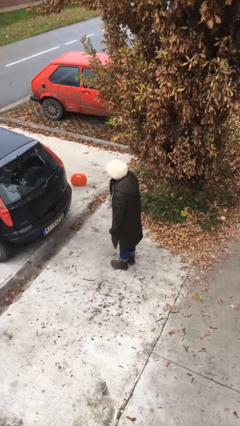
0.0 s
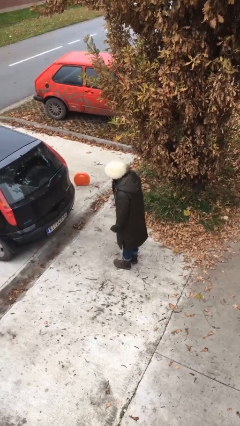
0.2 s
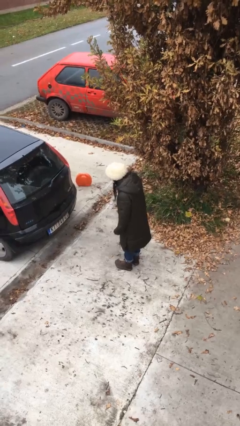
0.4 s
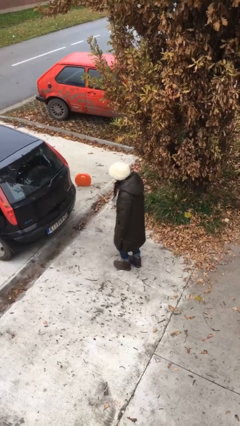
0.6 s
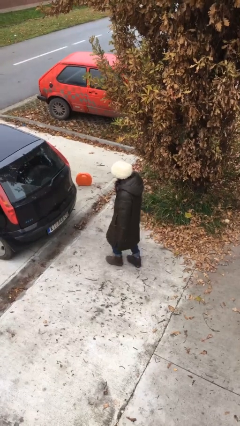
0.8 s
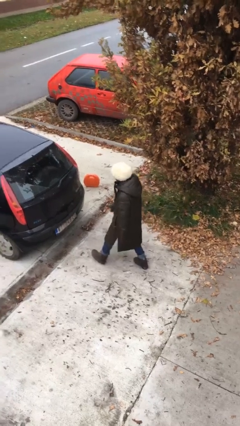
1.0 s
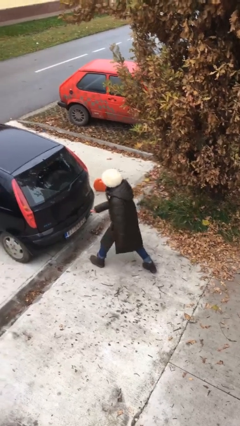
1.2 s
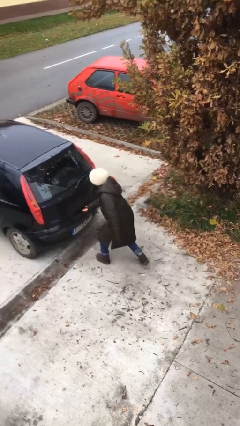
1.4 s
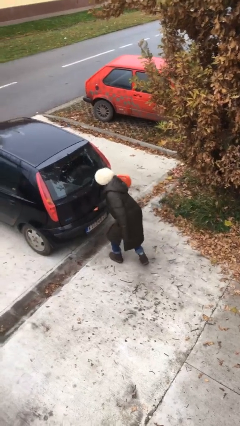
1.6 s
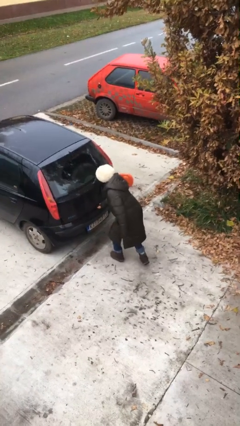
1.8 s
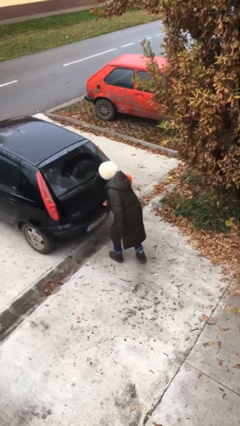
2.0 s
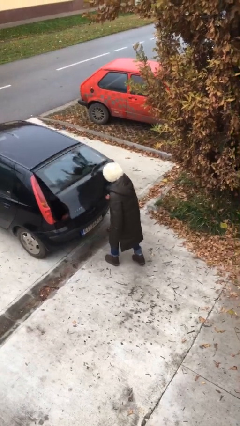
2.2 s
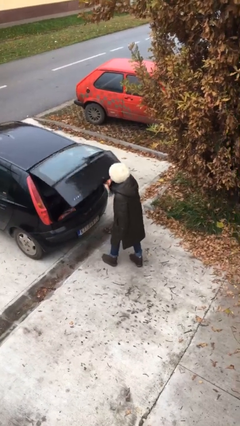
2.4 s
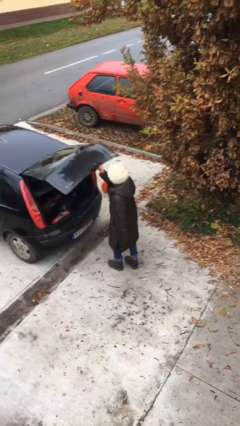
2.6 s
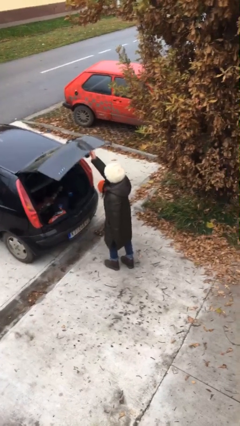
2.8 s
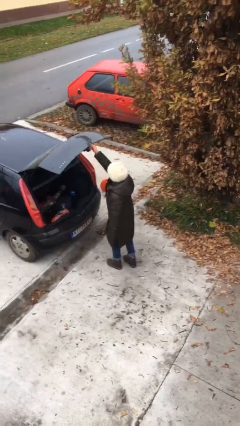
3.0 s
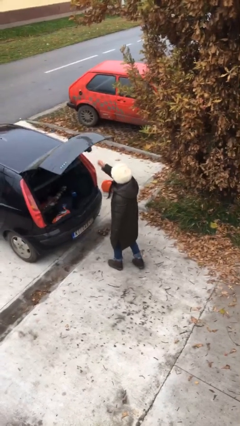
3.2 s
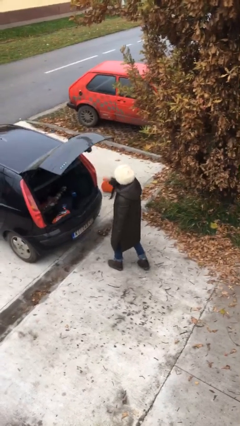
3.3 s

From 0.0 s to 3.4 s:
person opens car trunk

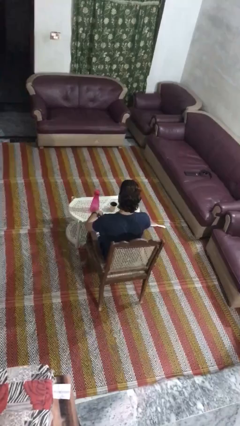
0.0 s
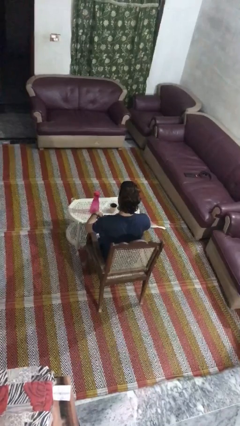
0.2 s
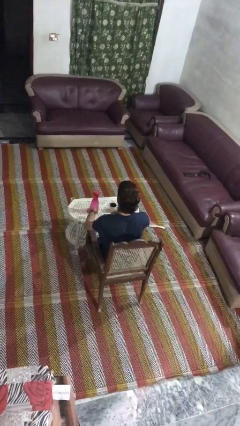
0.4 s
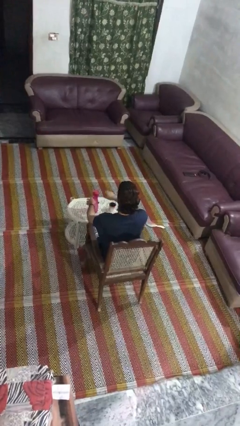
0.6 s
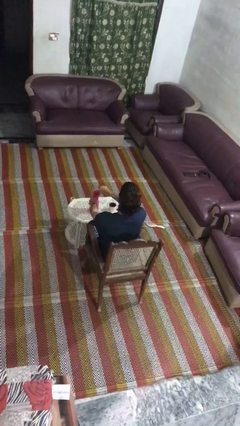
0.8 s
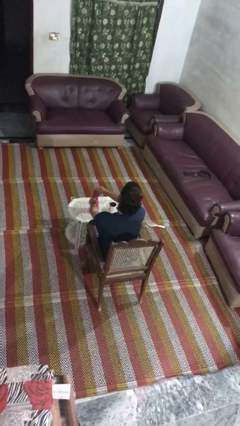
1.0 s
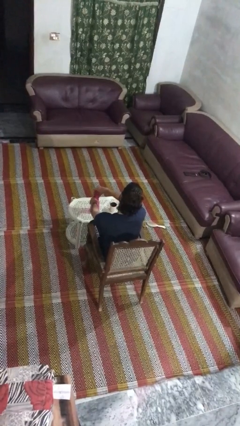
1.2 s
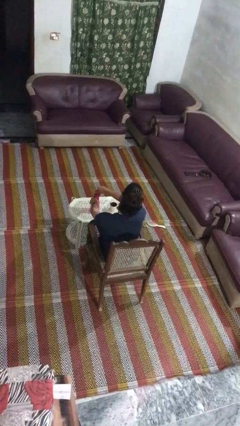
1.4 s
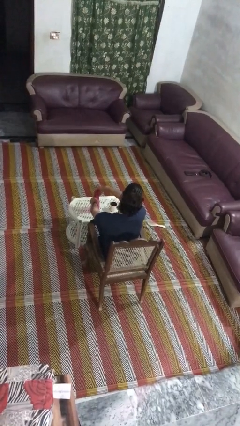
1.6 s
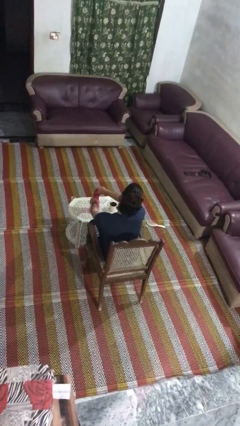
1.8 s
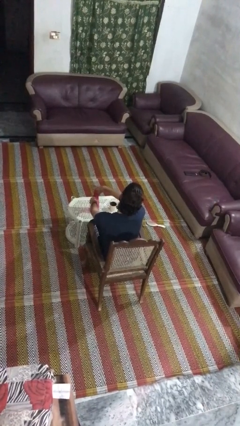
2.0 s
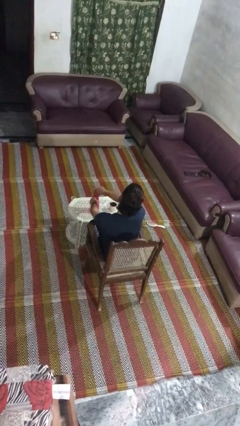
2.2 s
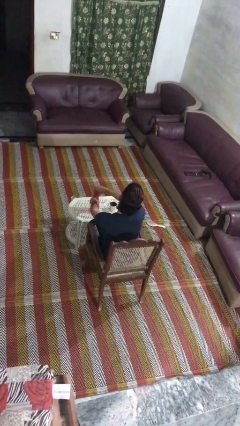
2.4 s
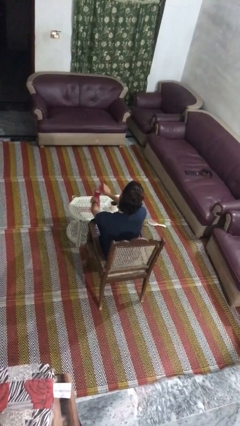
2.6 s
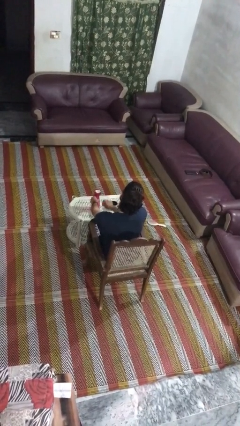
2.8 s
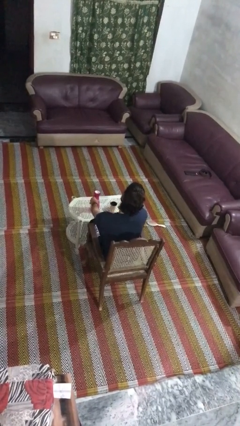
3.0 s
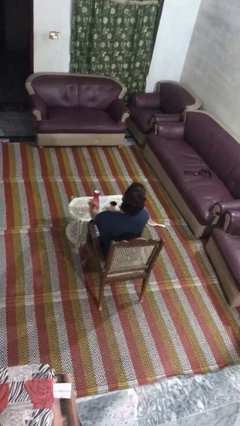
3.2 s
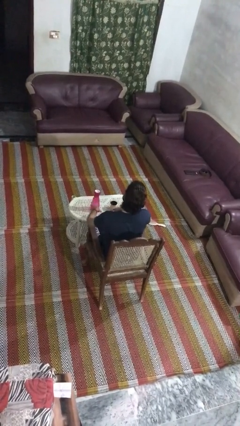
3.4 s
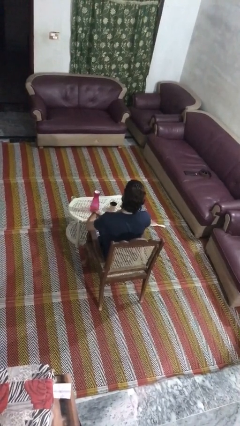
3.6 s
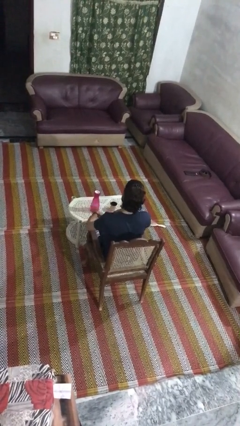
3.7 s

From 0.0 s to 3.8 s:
person unscrews lid from bottle

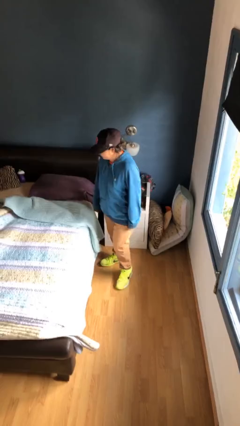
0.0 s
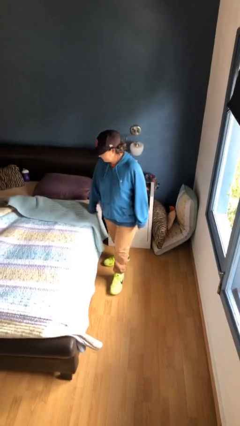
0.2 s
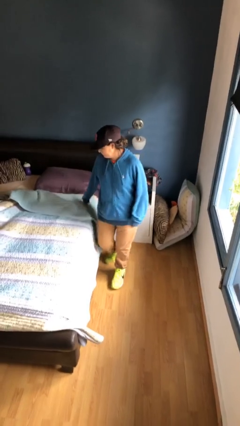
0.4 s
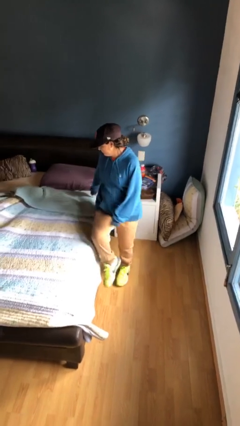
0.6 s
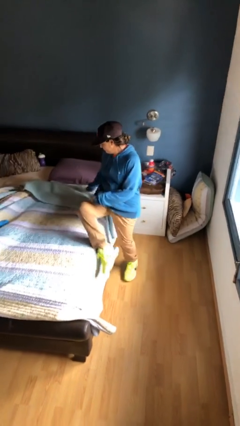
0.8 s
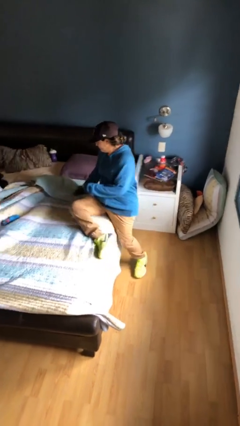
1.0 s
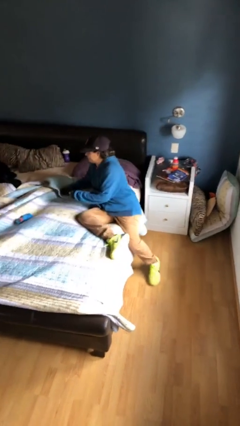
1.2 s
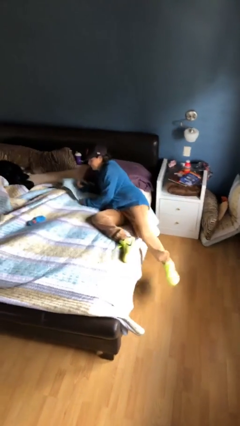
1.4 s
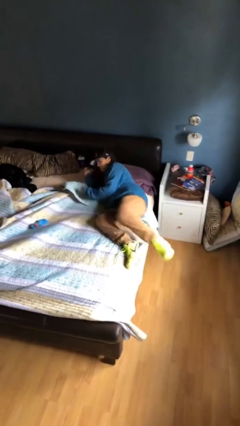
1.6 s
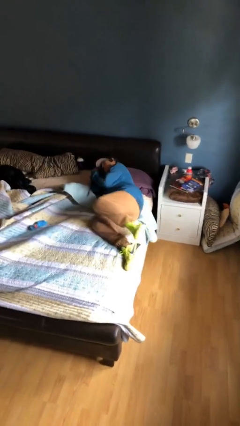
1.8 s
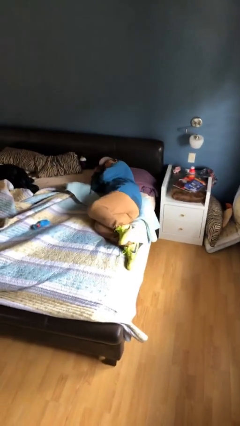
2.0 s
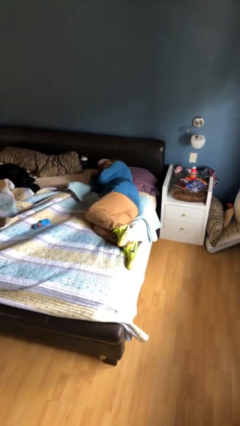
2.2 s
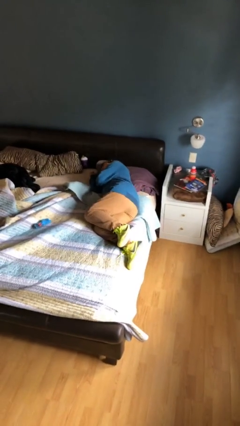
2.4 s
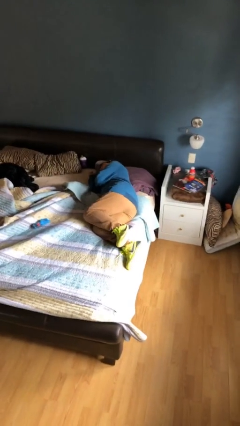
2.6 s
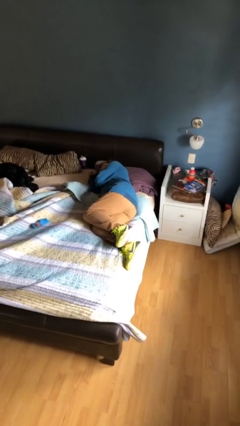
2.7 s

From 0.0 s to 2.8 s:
person lies down on bed

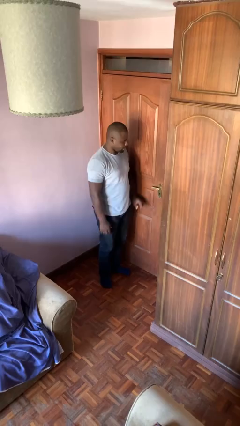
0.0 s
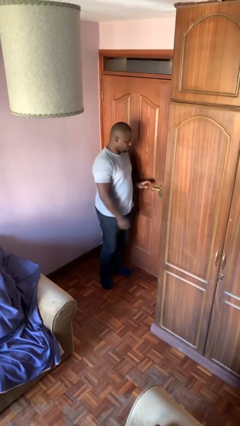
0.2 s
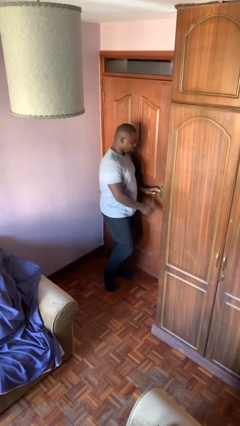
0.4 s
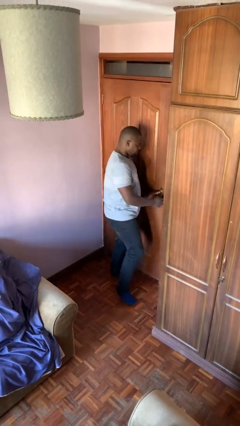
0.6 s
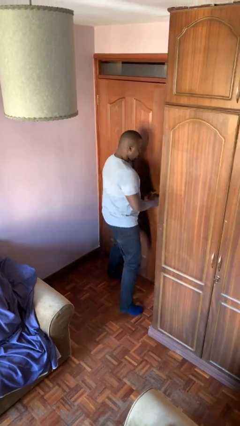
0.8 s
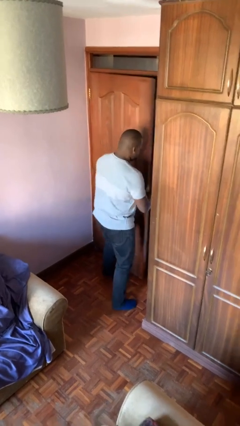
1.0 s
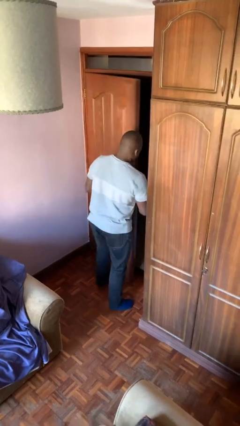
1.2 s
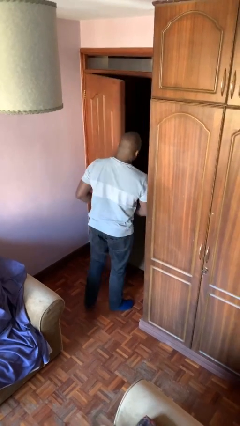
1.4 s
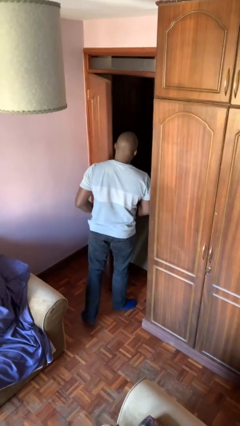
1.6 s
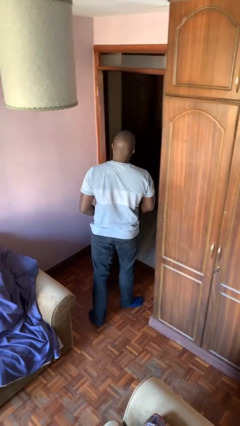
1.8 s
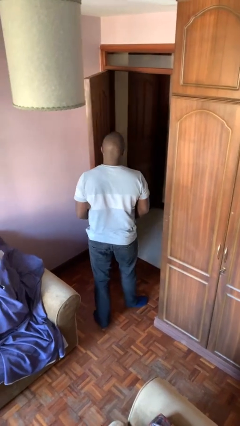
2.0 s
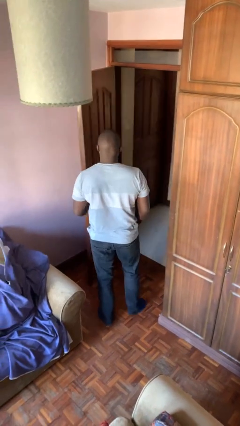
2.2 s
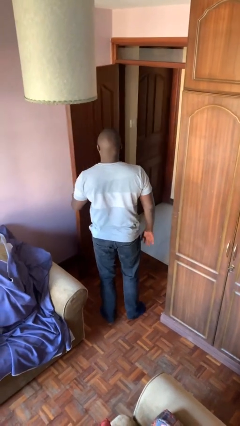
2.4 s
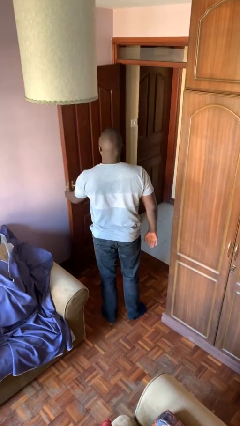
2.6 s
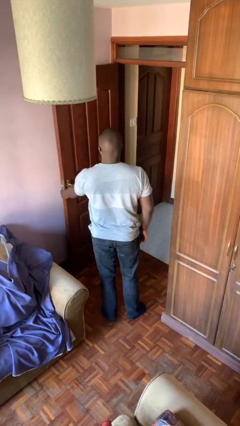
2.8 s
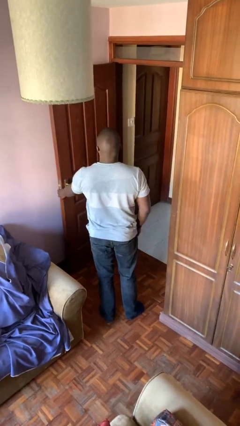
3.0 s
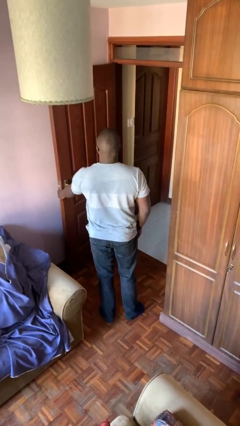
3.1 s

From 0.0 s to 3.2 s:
person opens facility door

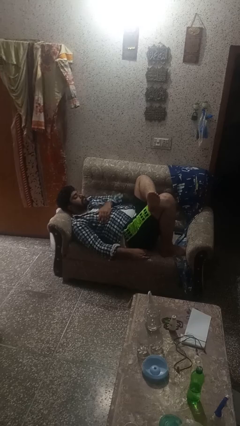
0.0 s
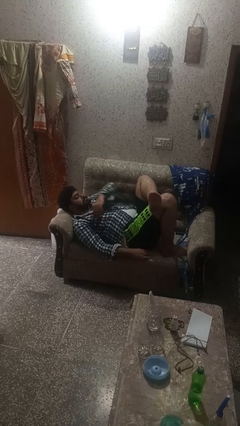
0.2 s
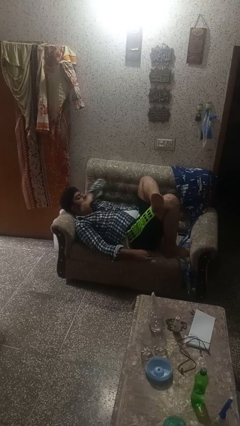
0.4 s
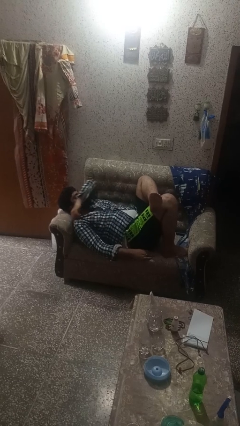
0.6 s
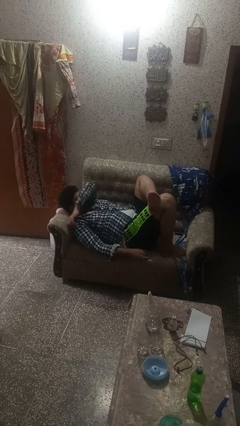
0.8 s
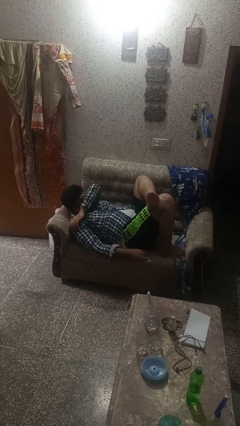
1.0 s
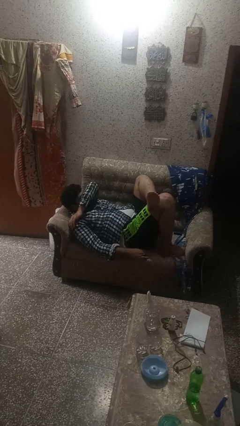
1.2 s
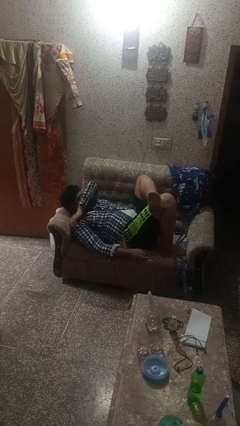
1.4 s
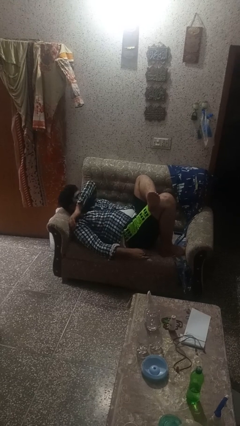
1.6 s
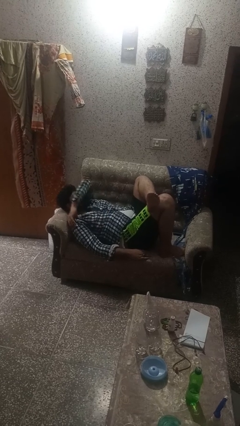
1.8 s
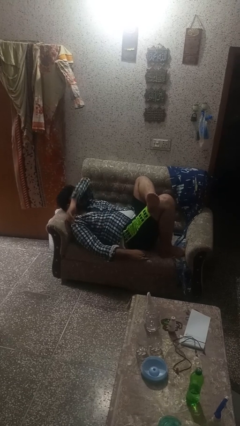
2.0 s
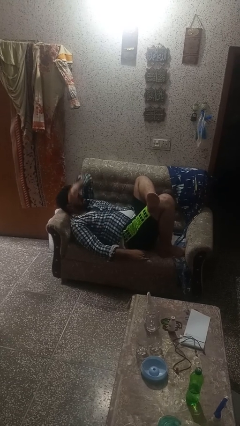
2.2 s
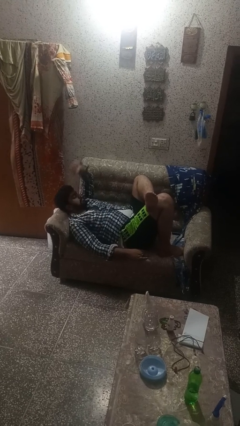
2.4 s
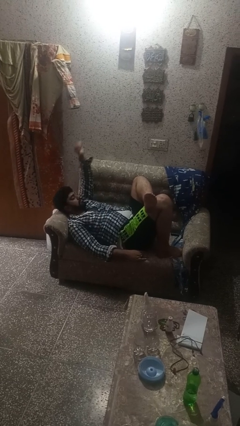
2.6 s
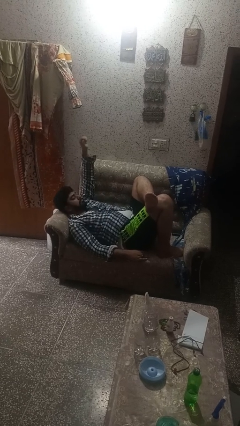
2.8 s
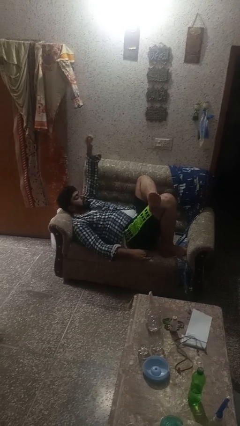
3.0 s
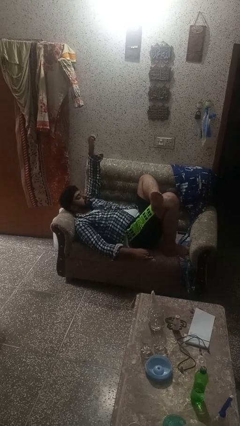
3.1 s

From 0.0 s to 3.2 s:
person sneezes into arm

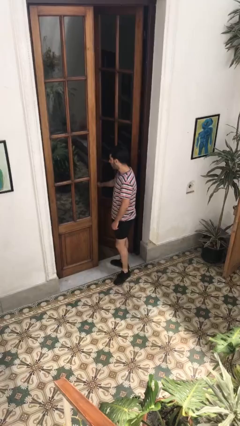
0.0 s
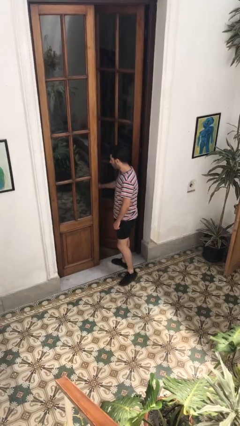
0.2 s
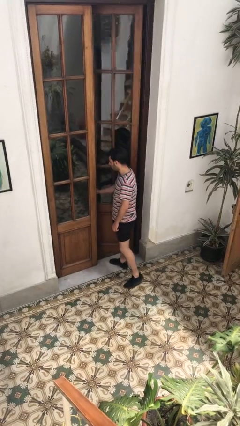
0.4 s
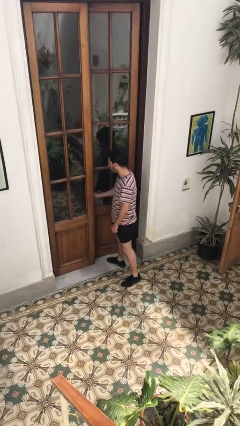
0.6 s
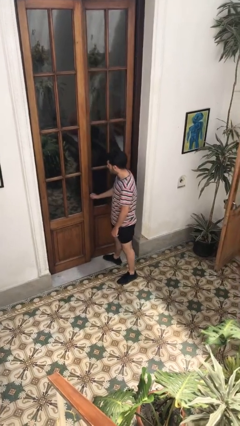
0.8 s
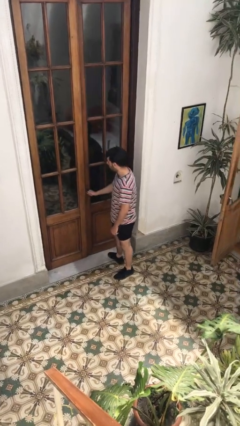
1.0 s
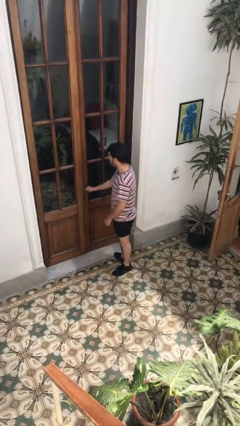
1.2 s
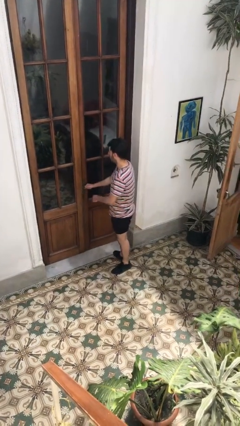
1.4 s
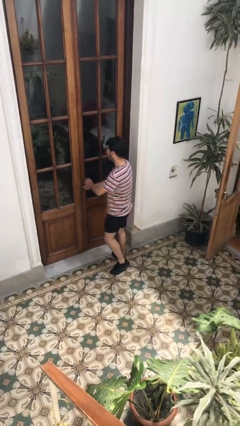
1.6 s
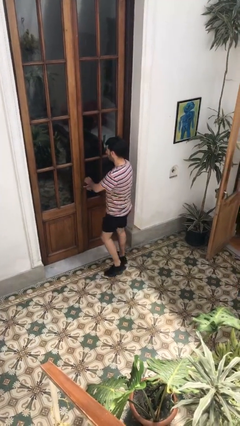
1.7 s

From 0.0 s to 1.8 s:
person closes facility door
